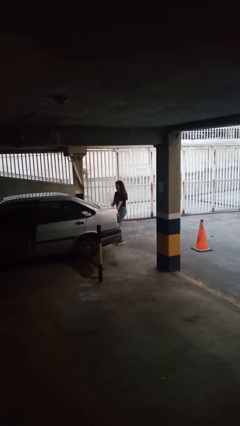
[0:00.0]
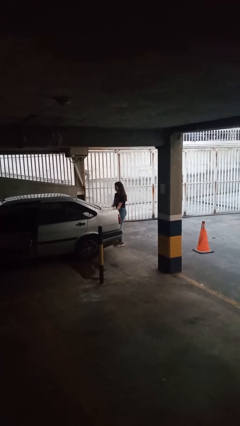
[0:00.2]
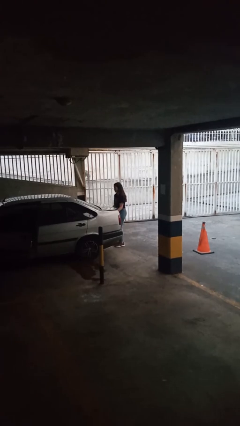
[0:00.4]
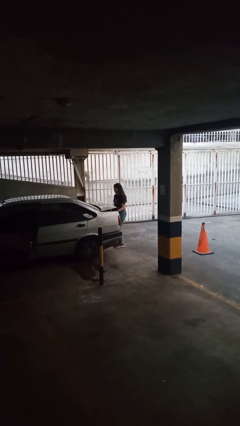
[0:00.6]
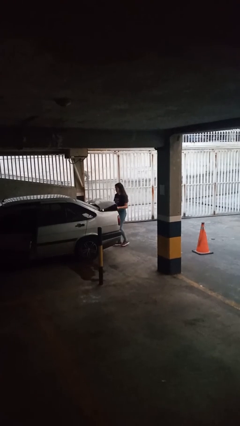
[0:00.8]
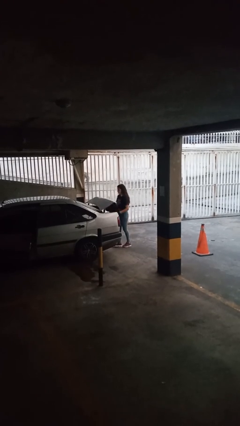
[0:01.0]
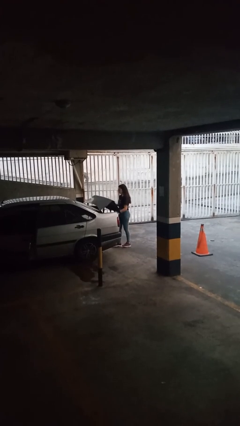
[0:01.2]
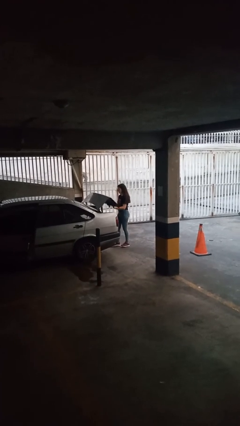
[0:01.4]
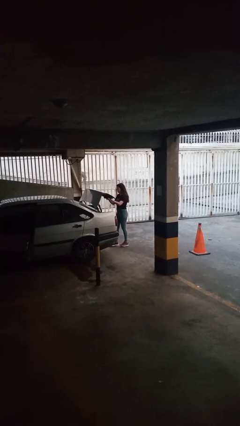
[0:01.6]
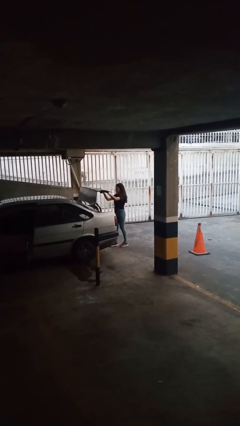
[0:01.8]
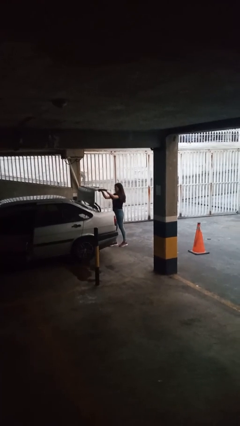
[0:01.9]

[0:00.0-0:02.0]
person opens car trunk

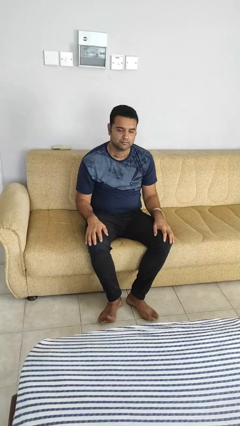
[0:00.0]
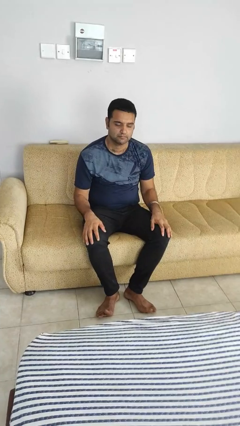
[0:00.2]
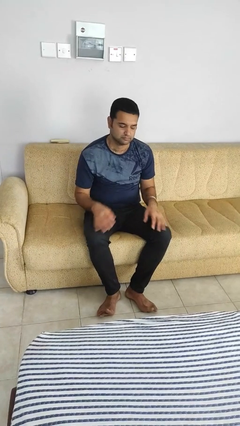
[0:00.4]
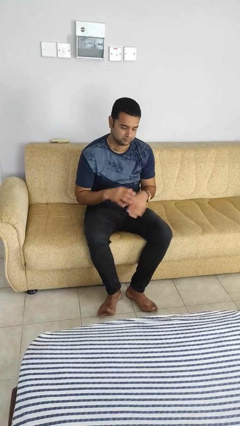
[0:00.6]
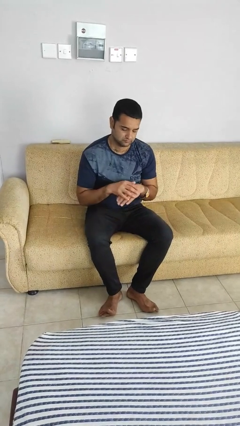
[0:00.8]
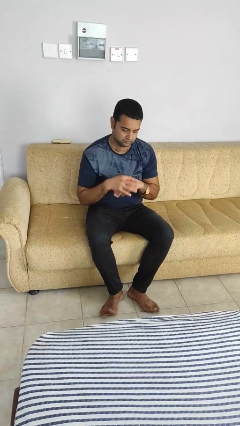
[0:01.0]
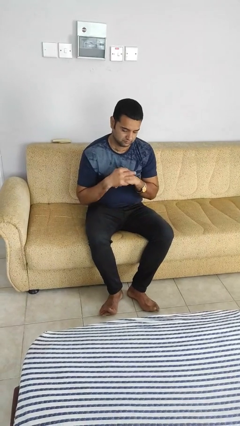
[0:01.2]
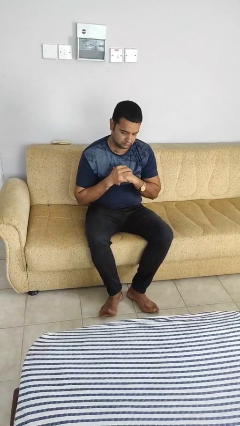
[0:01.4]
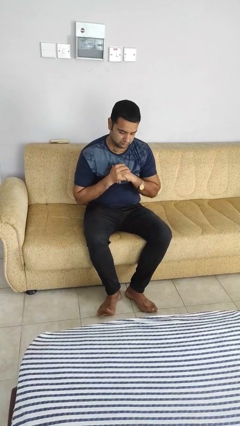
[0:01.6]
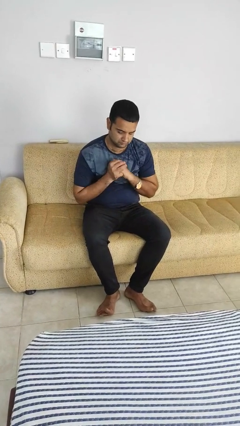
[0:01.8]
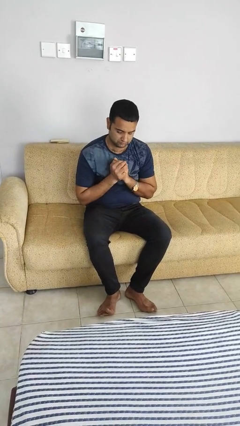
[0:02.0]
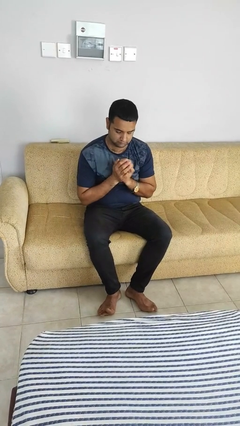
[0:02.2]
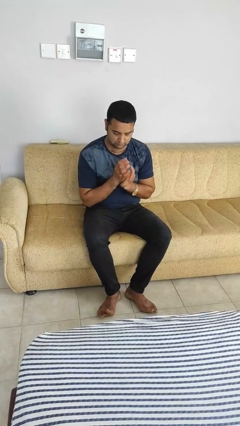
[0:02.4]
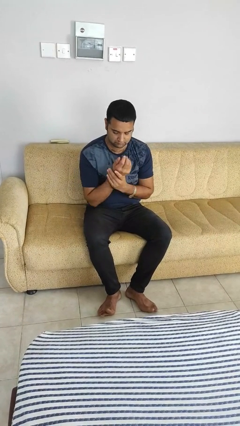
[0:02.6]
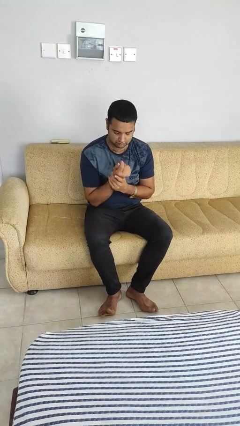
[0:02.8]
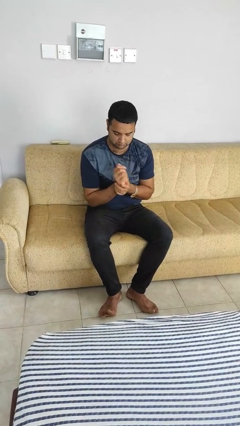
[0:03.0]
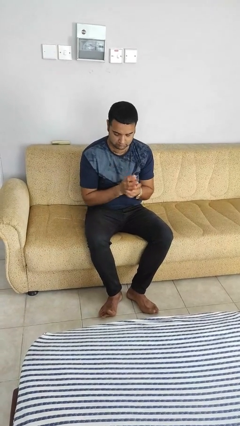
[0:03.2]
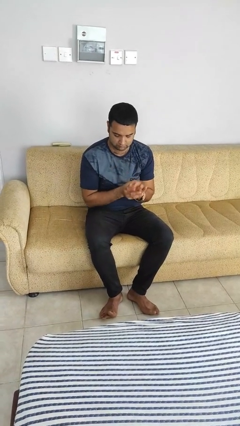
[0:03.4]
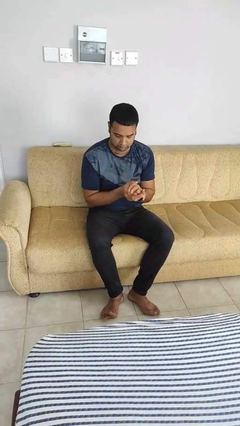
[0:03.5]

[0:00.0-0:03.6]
person looks at hands in lap

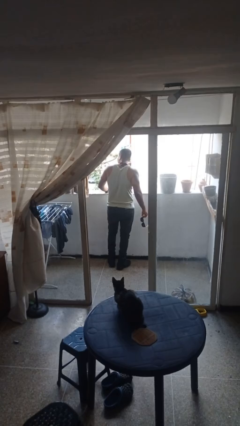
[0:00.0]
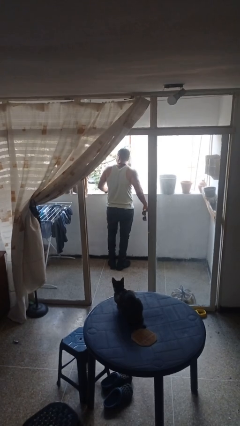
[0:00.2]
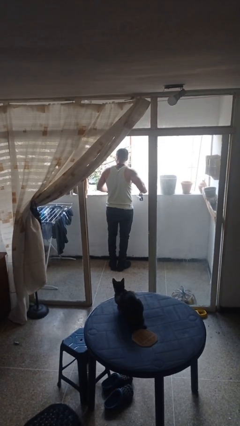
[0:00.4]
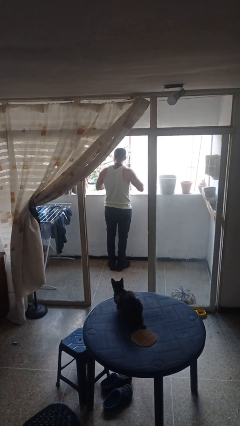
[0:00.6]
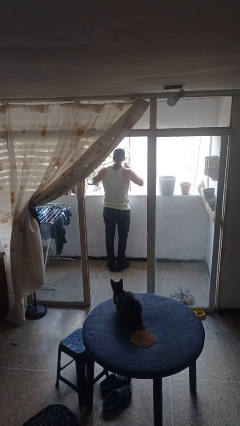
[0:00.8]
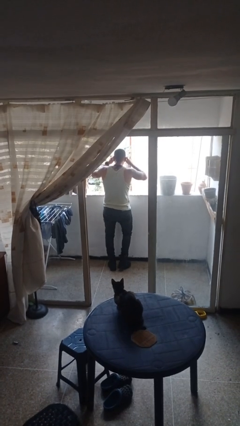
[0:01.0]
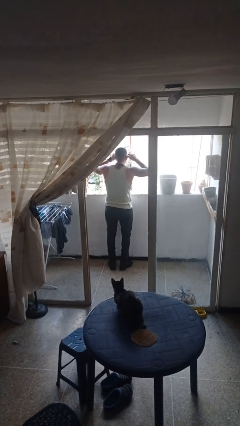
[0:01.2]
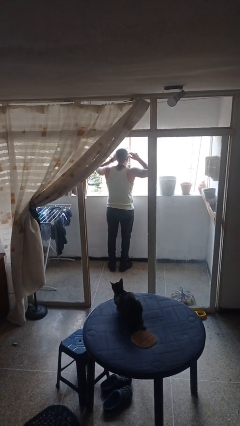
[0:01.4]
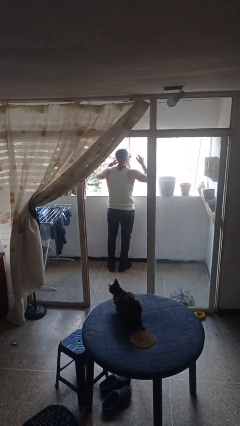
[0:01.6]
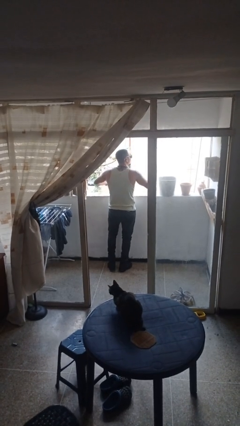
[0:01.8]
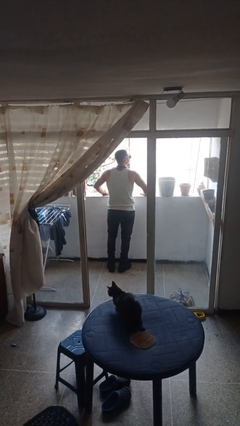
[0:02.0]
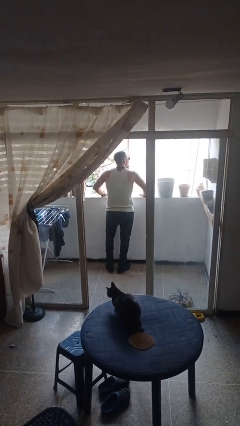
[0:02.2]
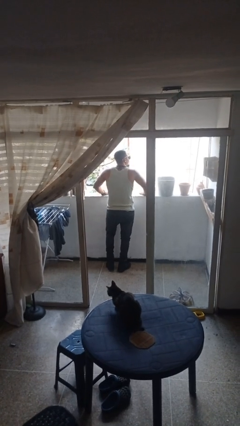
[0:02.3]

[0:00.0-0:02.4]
person puts on sunglasses

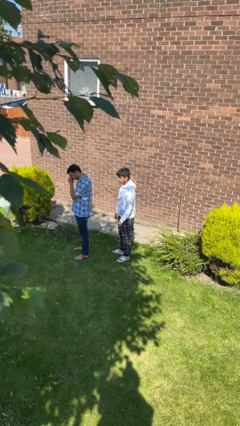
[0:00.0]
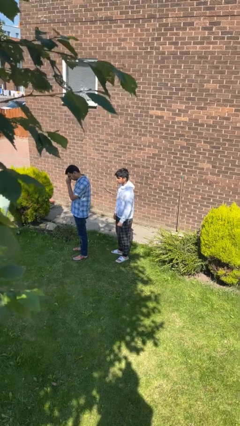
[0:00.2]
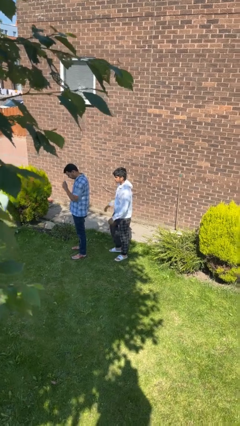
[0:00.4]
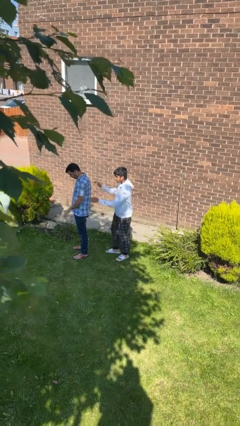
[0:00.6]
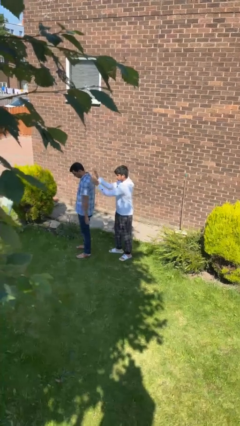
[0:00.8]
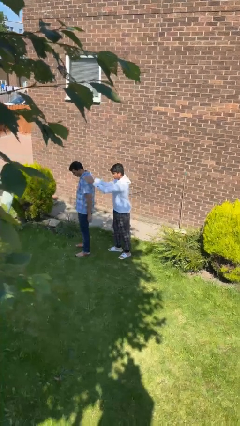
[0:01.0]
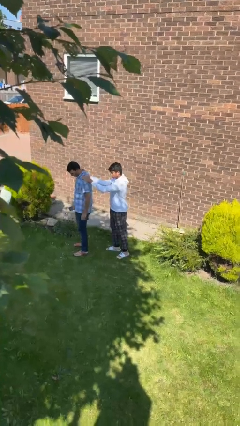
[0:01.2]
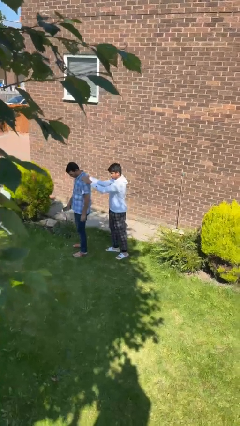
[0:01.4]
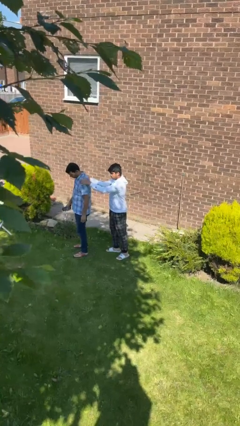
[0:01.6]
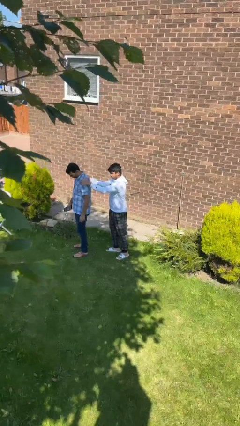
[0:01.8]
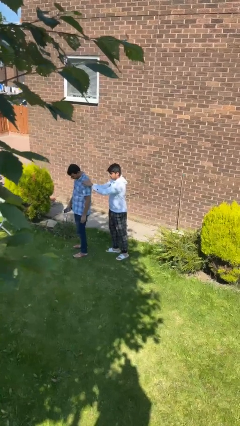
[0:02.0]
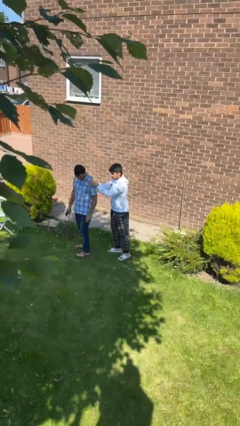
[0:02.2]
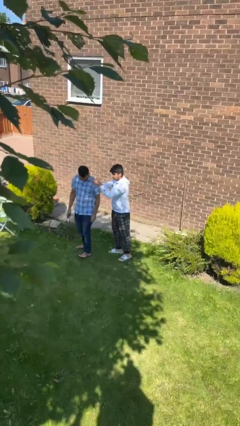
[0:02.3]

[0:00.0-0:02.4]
person grabs person by shoulder

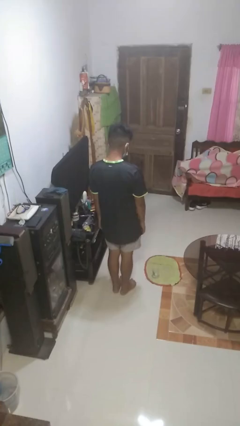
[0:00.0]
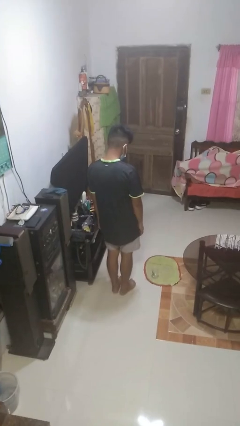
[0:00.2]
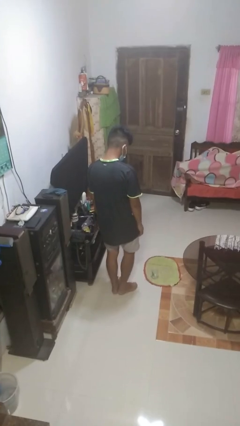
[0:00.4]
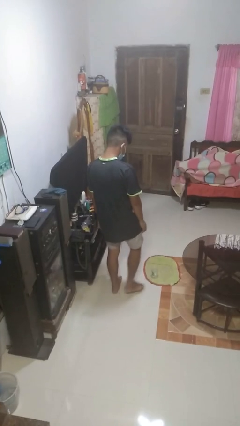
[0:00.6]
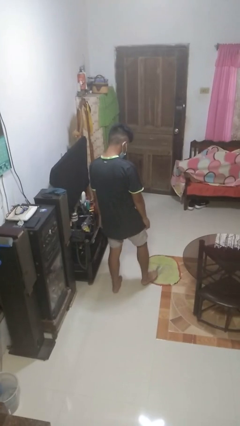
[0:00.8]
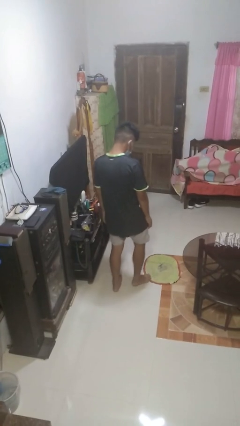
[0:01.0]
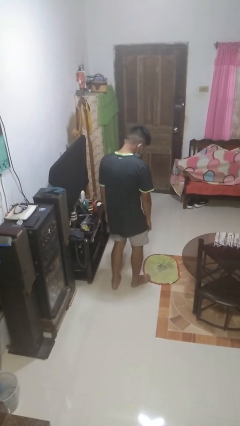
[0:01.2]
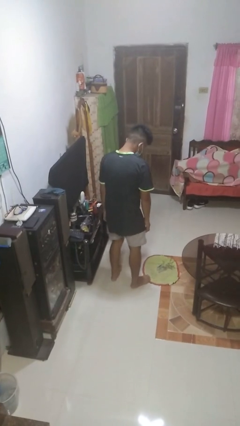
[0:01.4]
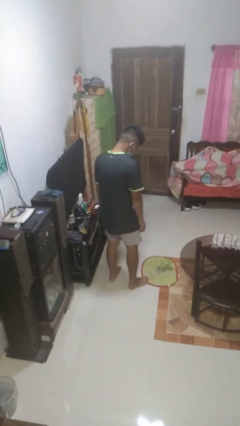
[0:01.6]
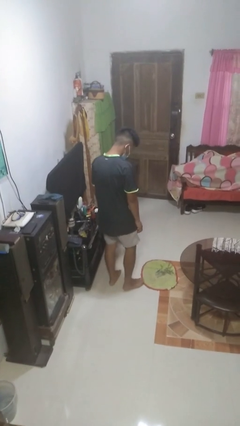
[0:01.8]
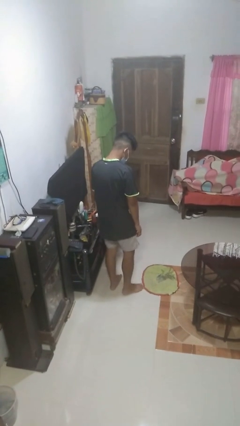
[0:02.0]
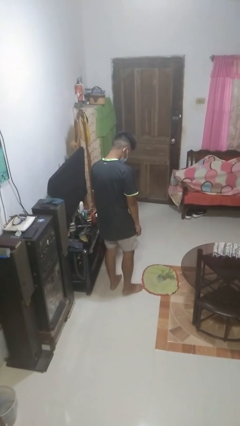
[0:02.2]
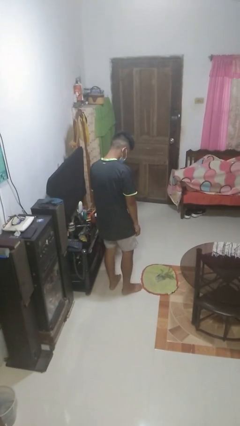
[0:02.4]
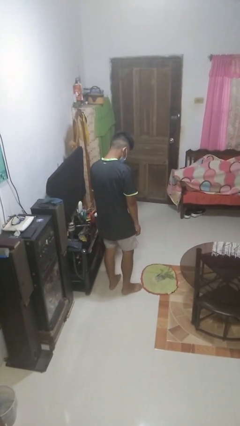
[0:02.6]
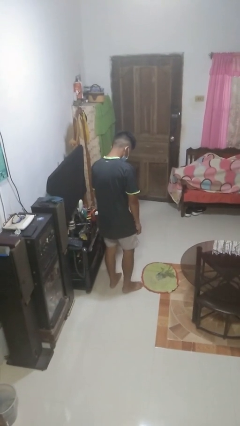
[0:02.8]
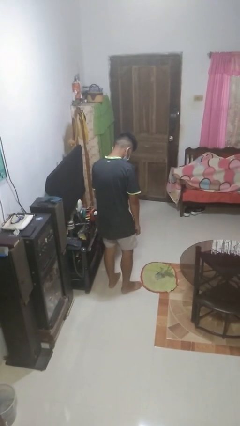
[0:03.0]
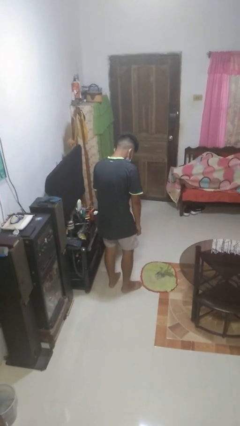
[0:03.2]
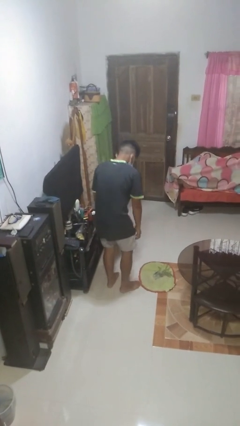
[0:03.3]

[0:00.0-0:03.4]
person spills on floor

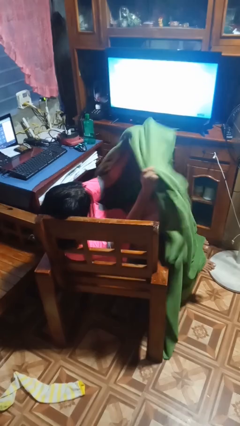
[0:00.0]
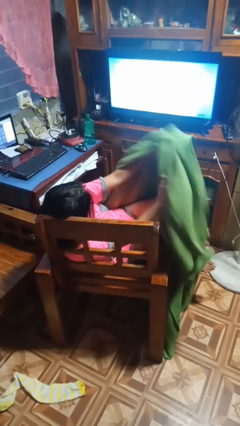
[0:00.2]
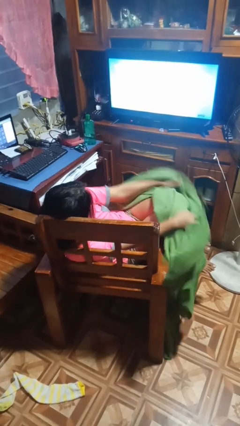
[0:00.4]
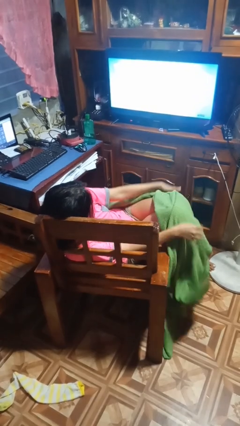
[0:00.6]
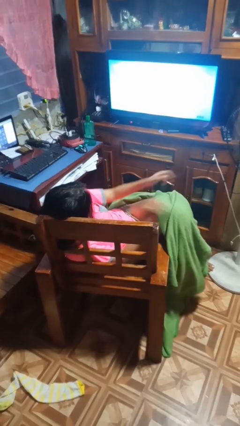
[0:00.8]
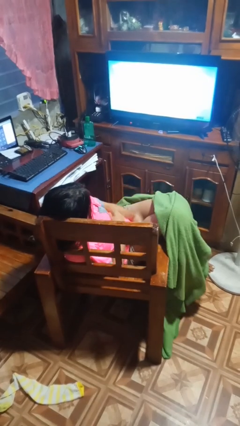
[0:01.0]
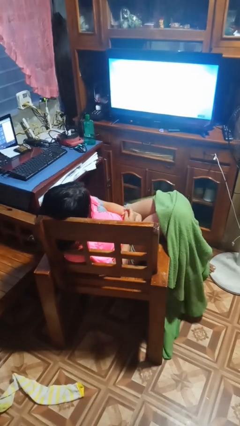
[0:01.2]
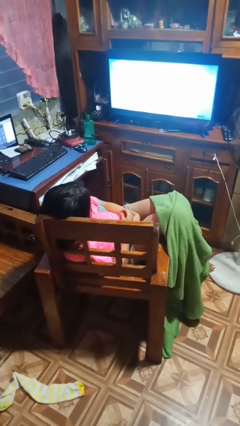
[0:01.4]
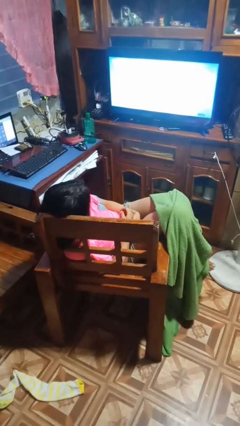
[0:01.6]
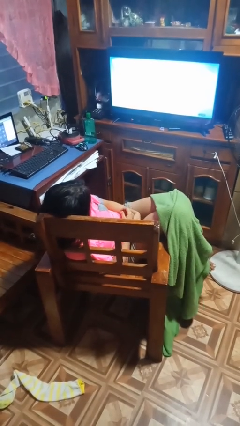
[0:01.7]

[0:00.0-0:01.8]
person uncovers with blanket

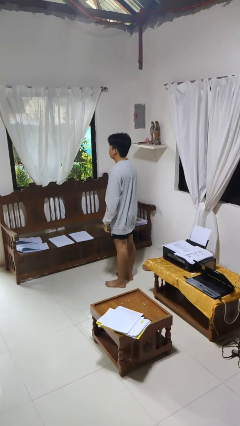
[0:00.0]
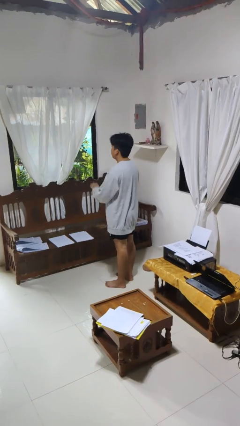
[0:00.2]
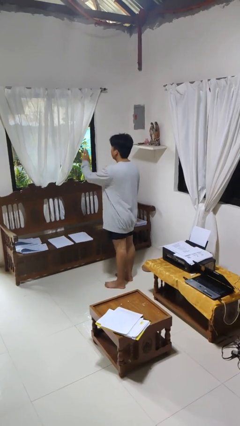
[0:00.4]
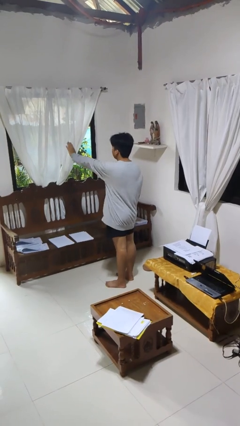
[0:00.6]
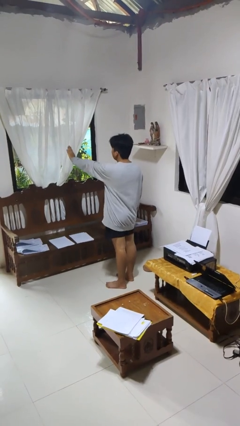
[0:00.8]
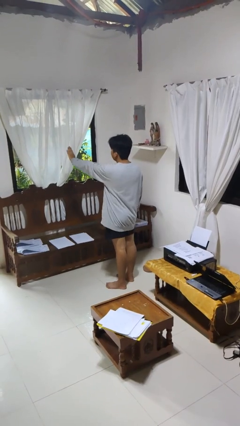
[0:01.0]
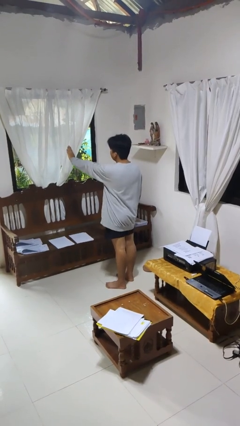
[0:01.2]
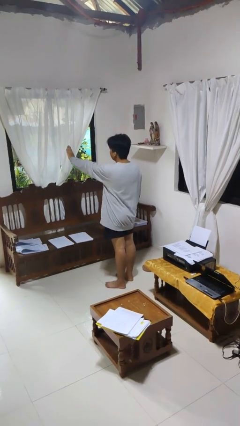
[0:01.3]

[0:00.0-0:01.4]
person gestures stop

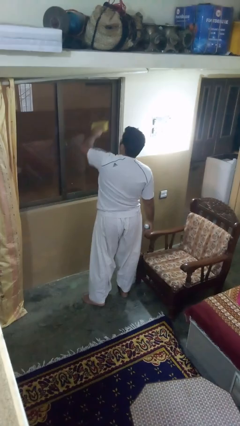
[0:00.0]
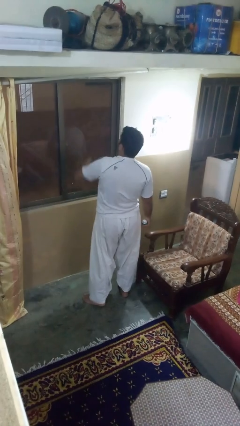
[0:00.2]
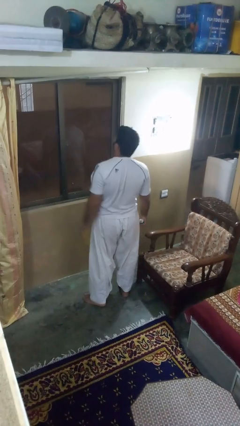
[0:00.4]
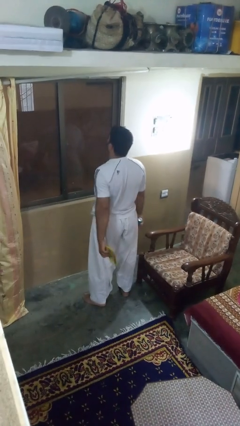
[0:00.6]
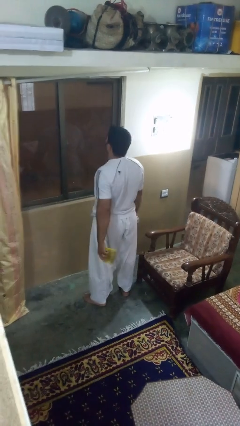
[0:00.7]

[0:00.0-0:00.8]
person washes window
